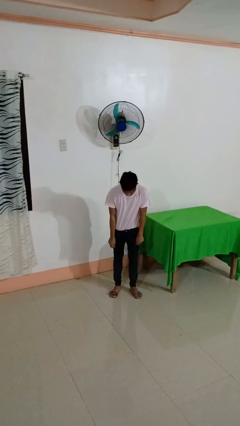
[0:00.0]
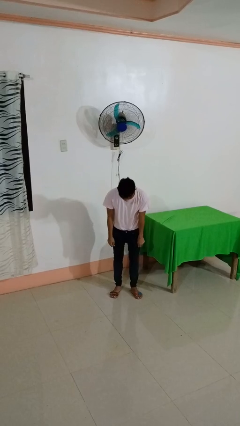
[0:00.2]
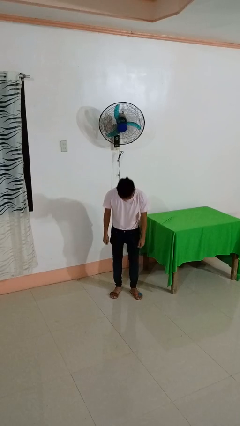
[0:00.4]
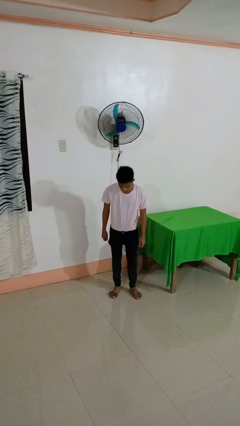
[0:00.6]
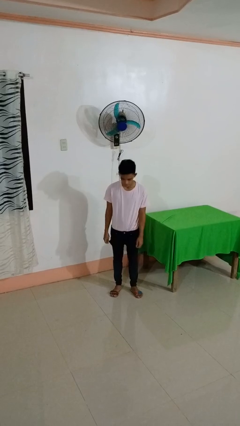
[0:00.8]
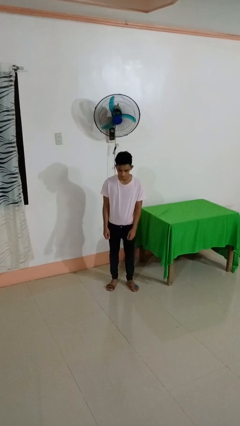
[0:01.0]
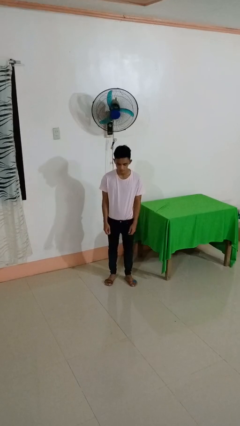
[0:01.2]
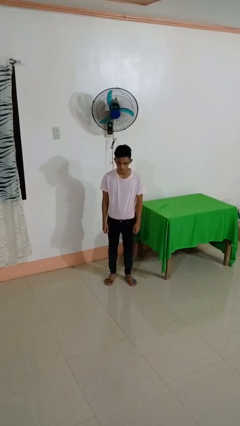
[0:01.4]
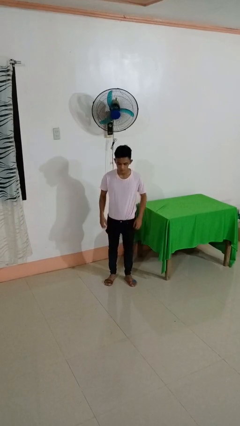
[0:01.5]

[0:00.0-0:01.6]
person hikes up pants

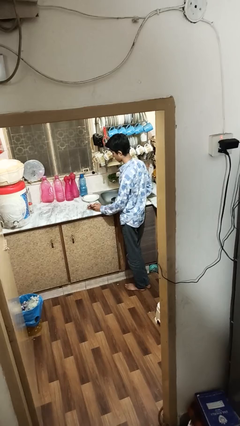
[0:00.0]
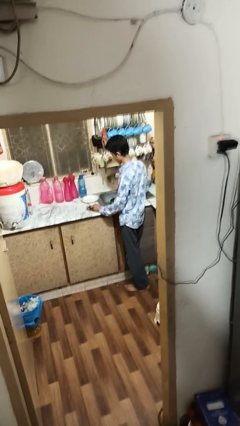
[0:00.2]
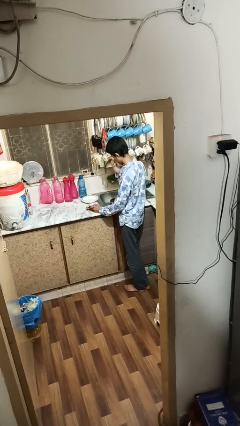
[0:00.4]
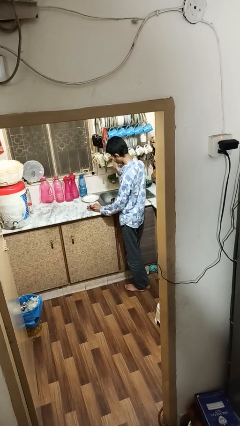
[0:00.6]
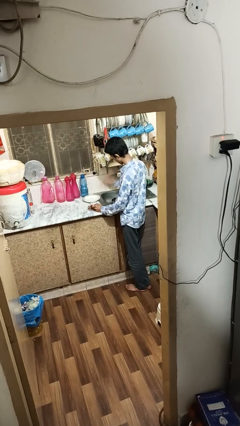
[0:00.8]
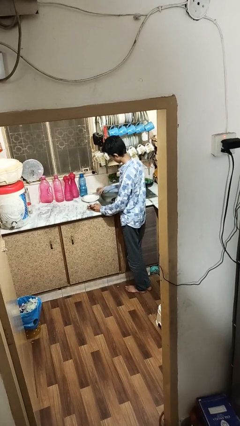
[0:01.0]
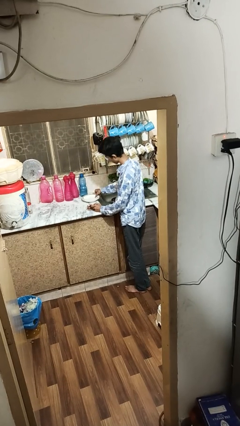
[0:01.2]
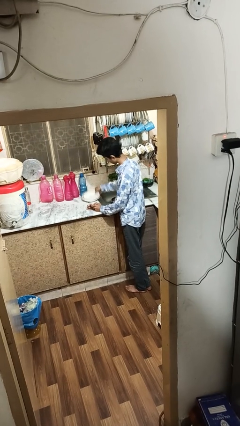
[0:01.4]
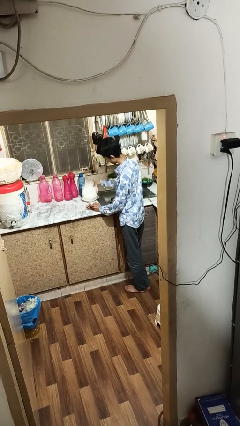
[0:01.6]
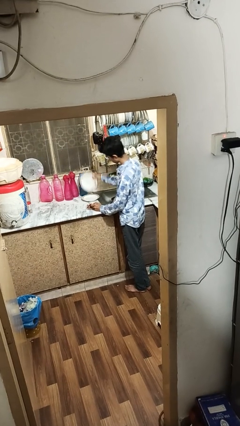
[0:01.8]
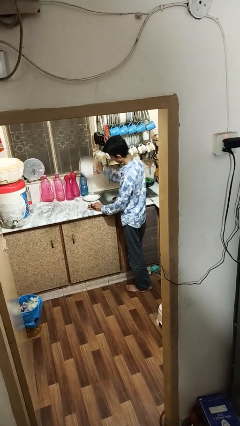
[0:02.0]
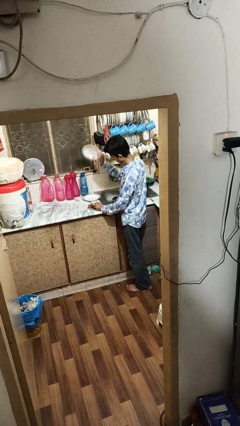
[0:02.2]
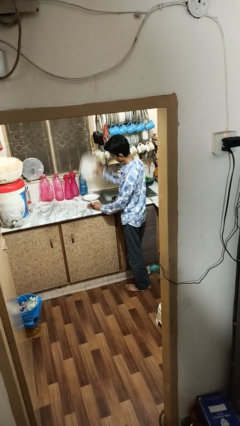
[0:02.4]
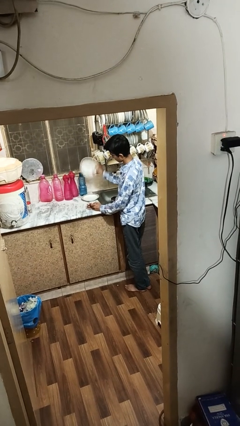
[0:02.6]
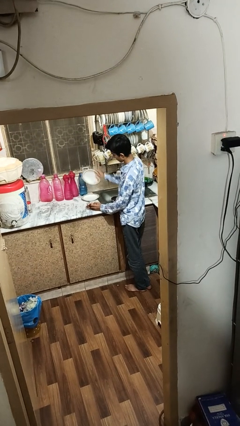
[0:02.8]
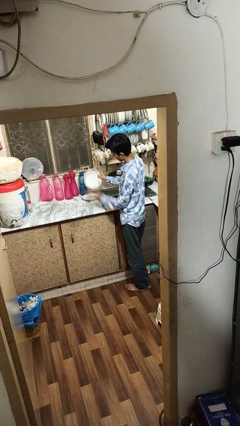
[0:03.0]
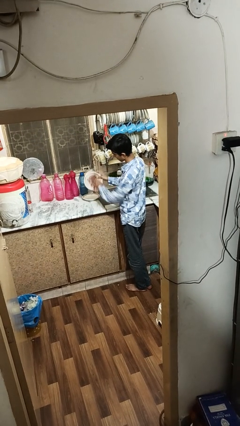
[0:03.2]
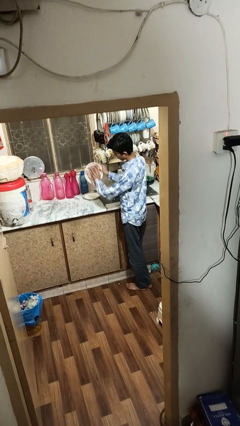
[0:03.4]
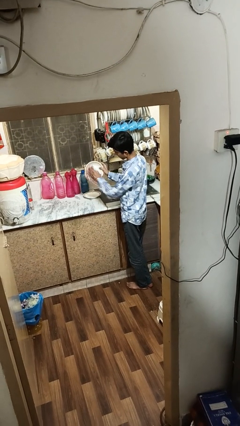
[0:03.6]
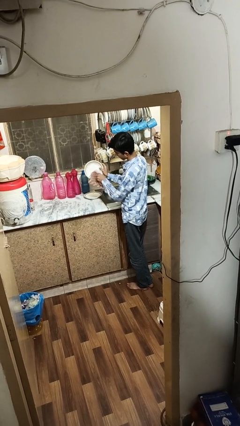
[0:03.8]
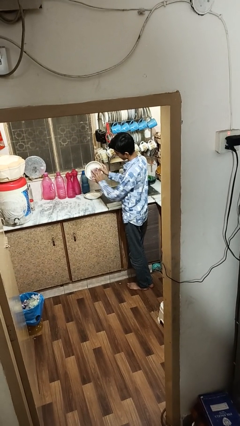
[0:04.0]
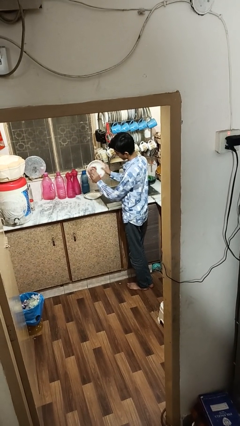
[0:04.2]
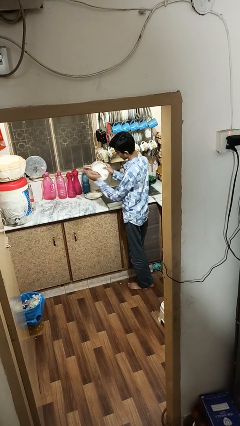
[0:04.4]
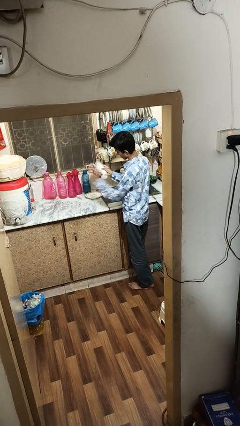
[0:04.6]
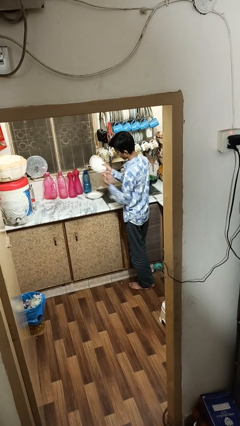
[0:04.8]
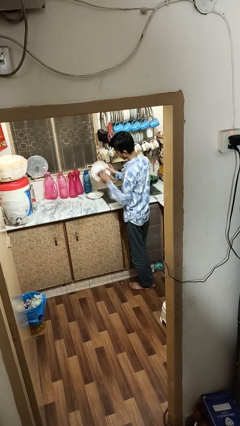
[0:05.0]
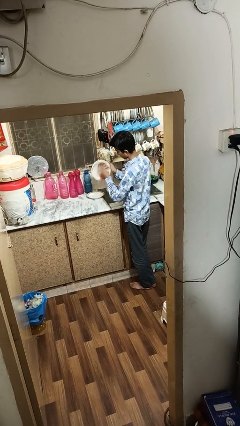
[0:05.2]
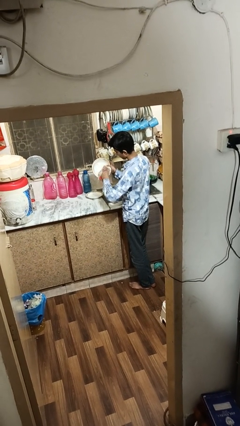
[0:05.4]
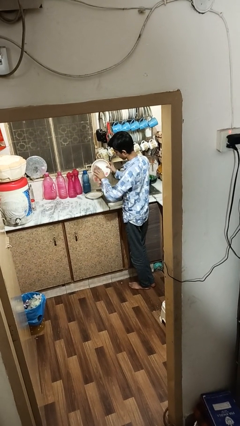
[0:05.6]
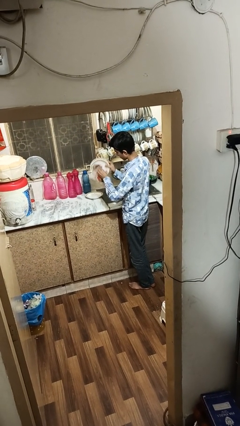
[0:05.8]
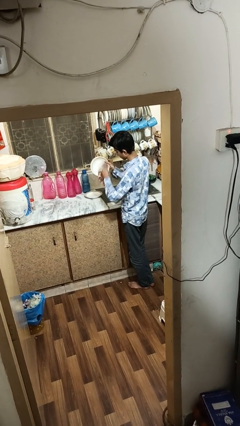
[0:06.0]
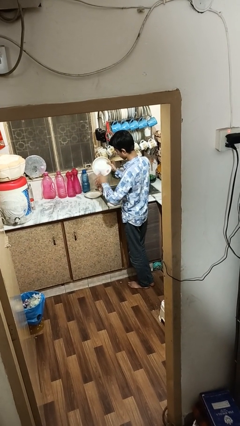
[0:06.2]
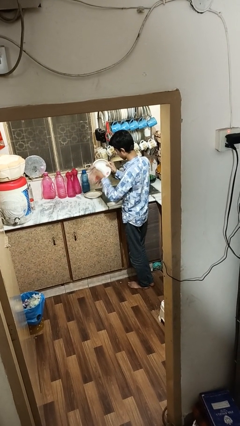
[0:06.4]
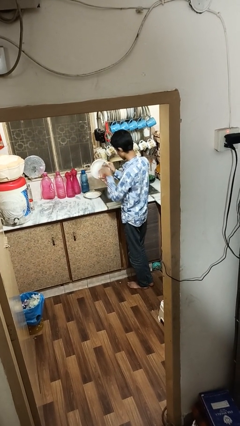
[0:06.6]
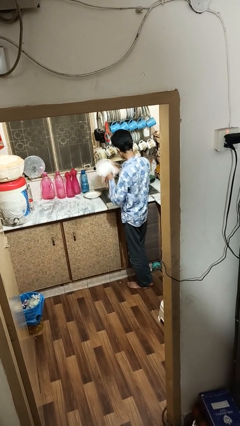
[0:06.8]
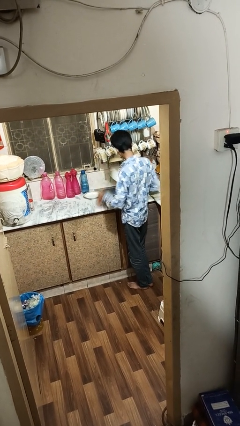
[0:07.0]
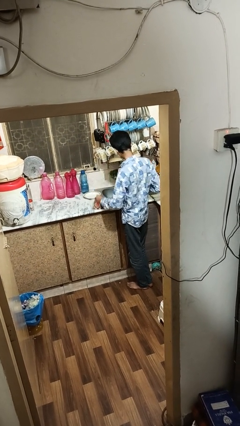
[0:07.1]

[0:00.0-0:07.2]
person dries dish

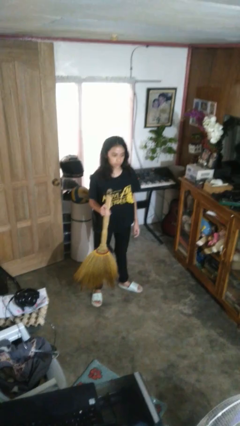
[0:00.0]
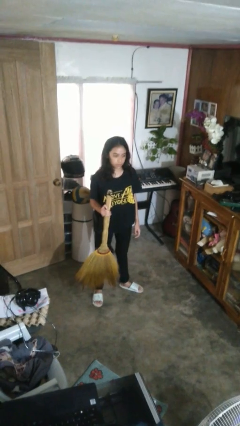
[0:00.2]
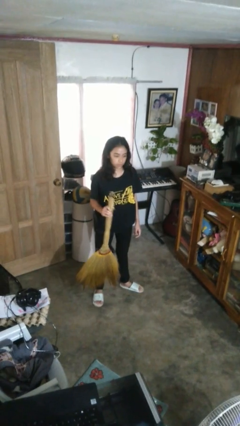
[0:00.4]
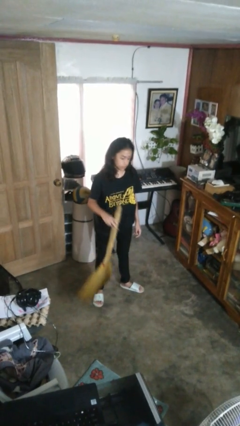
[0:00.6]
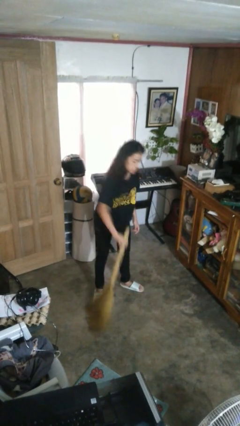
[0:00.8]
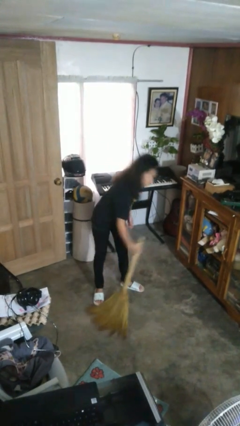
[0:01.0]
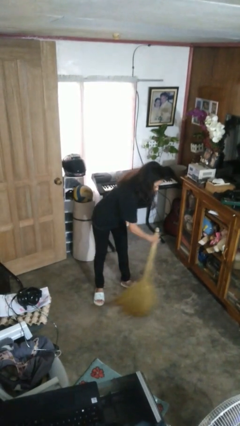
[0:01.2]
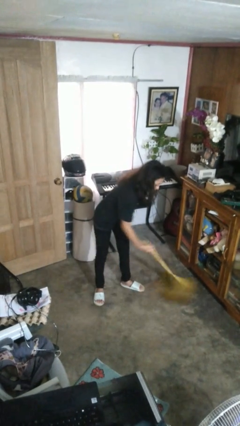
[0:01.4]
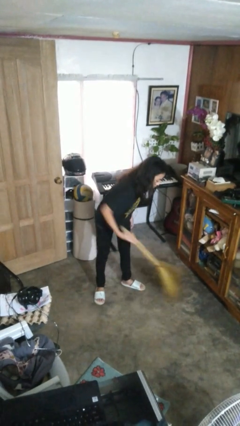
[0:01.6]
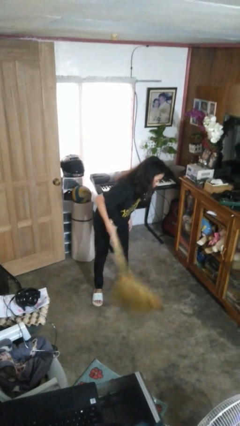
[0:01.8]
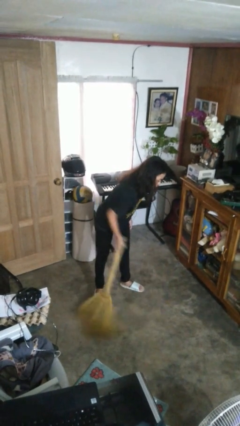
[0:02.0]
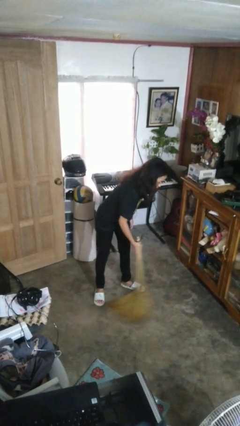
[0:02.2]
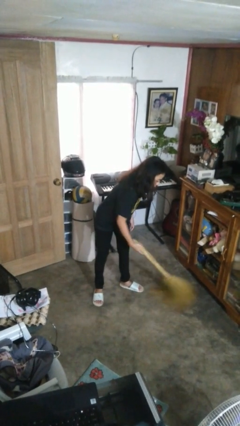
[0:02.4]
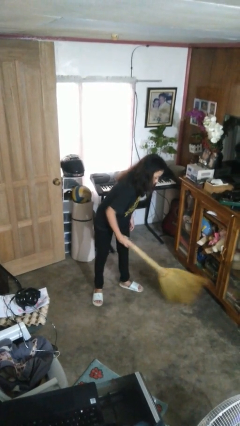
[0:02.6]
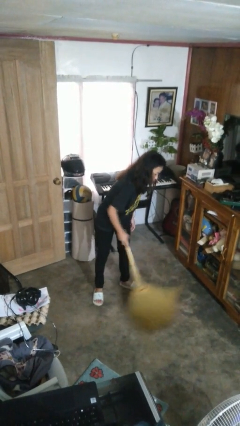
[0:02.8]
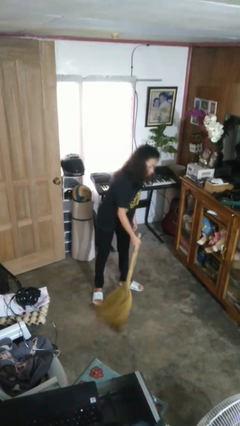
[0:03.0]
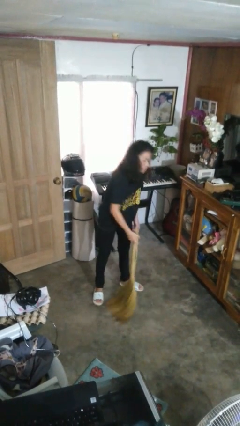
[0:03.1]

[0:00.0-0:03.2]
person sweeps floor

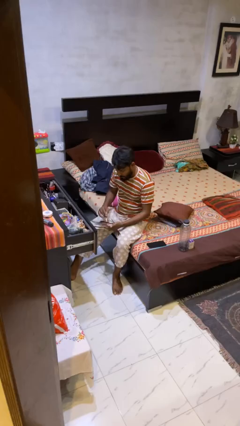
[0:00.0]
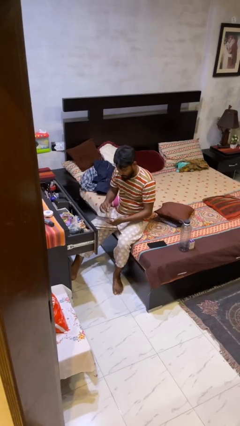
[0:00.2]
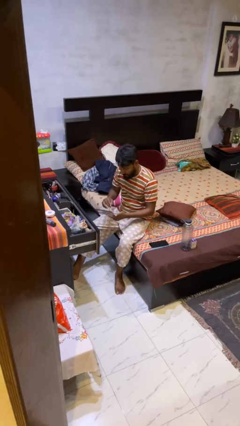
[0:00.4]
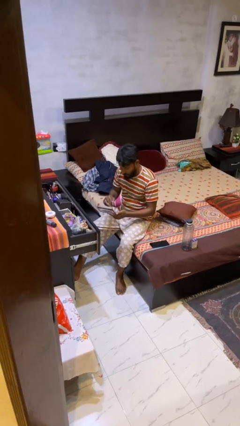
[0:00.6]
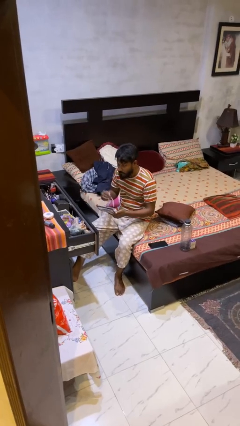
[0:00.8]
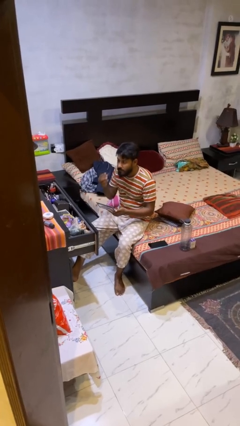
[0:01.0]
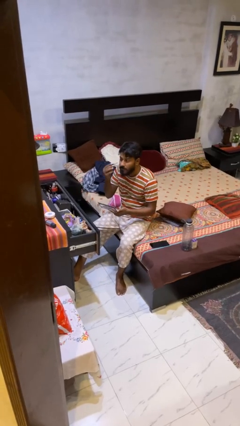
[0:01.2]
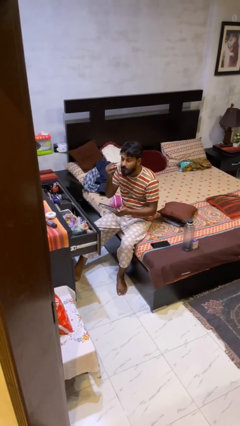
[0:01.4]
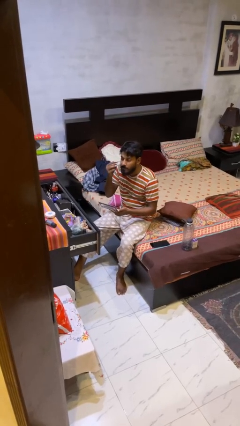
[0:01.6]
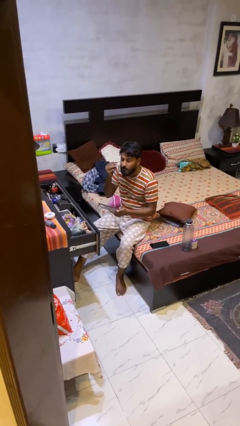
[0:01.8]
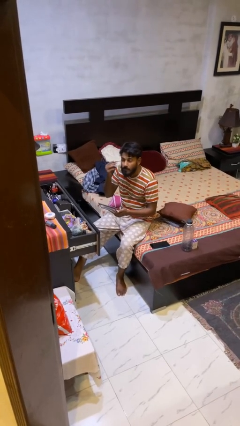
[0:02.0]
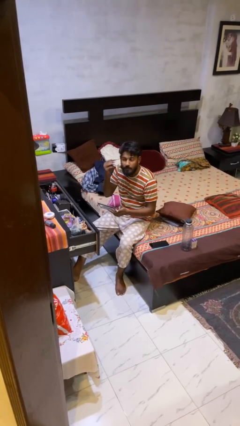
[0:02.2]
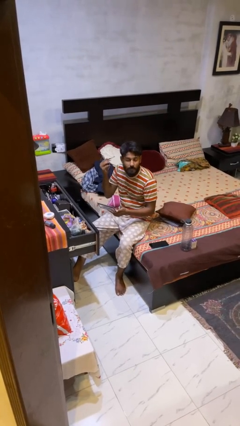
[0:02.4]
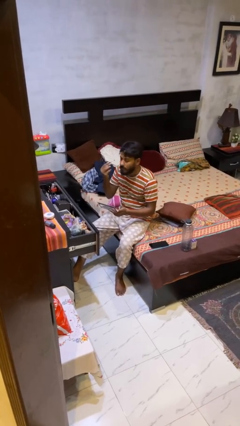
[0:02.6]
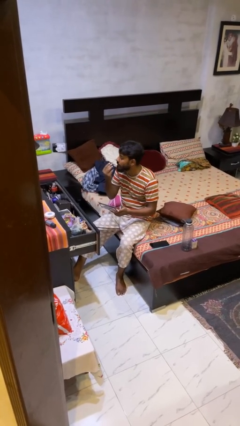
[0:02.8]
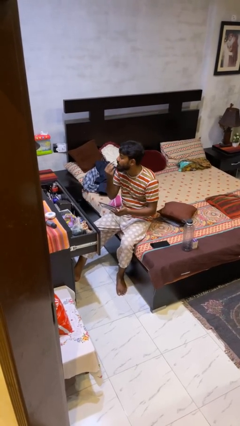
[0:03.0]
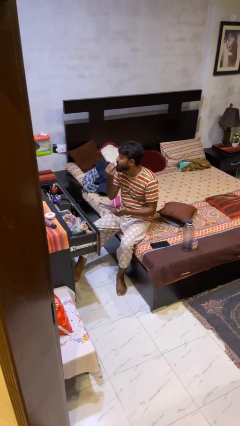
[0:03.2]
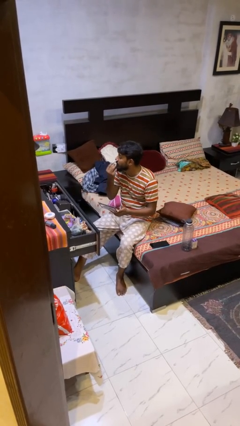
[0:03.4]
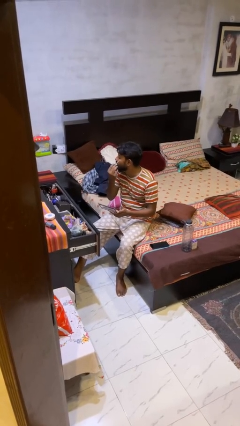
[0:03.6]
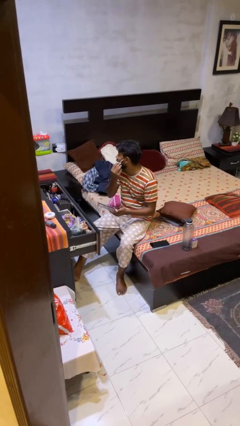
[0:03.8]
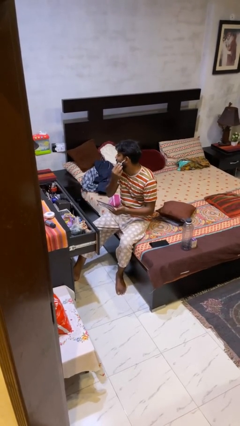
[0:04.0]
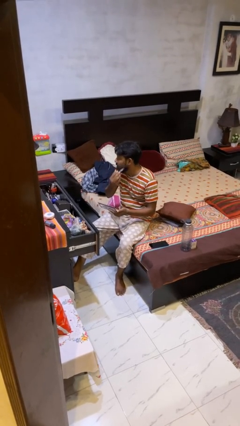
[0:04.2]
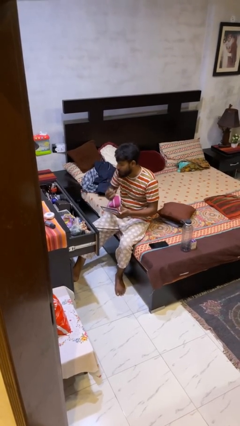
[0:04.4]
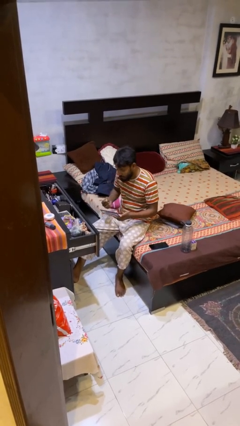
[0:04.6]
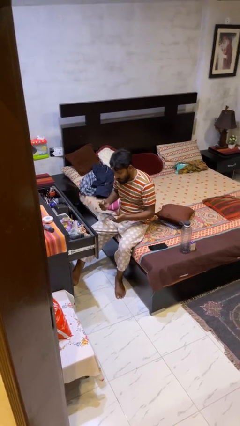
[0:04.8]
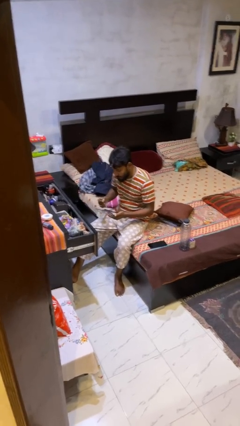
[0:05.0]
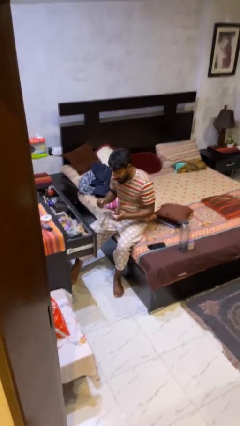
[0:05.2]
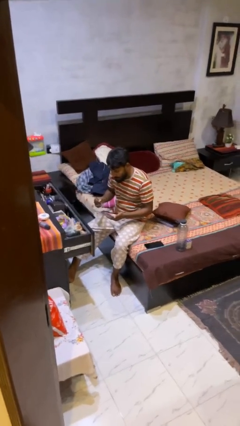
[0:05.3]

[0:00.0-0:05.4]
person applies eye makeup

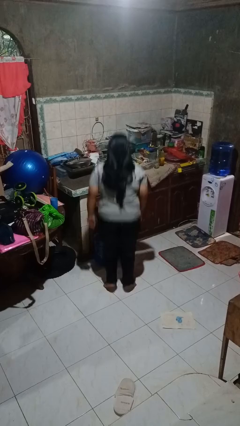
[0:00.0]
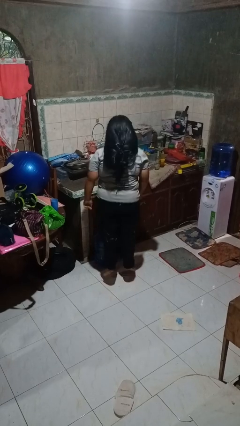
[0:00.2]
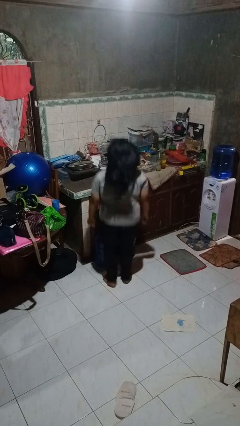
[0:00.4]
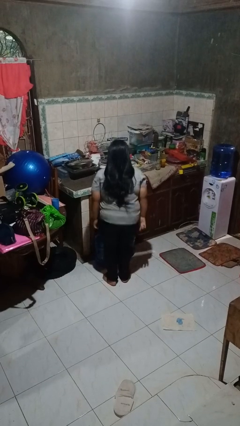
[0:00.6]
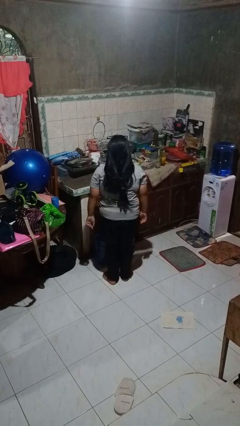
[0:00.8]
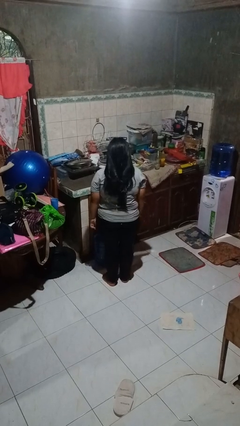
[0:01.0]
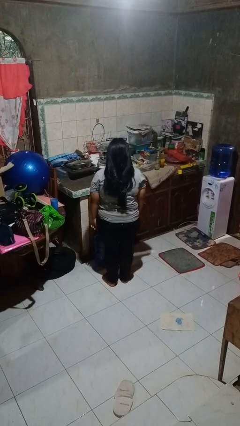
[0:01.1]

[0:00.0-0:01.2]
person jumps
